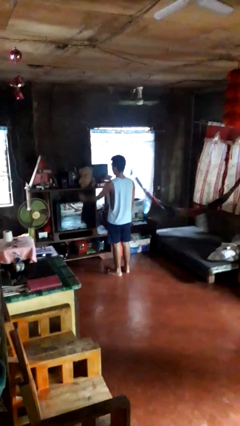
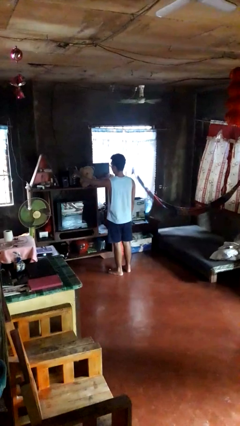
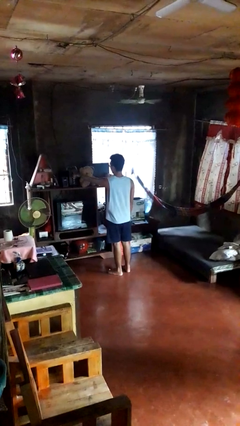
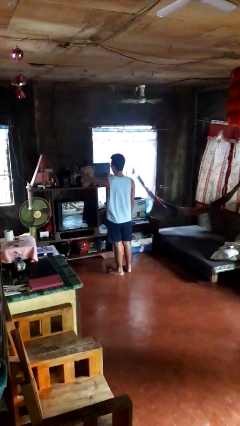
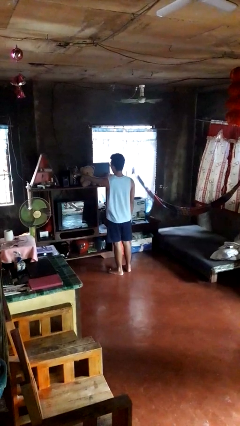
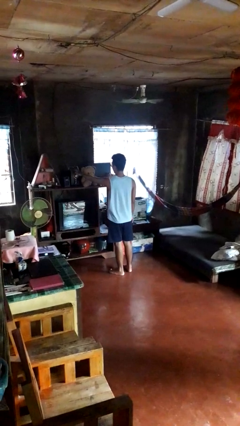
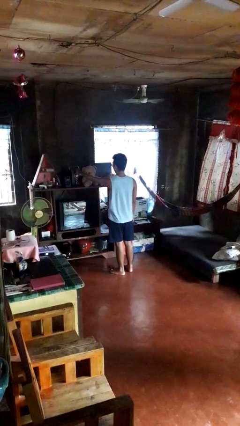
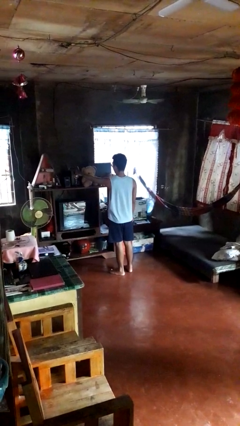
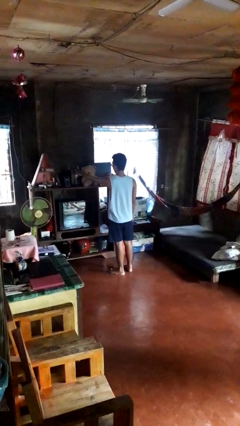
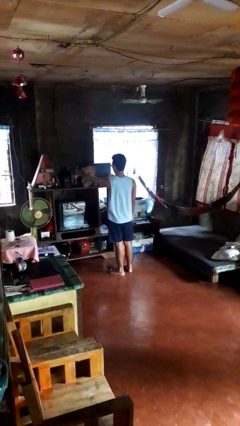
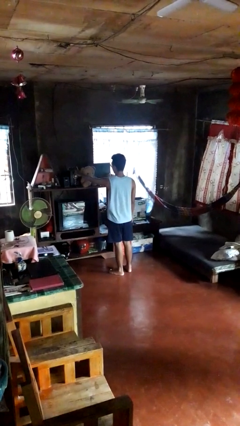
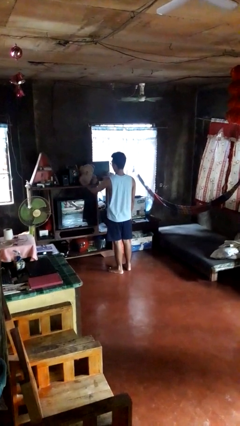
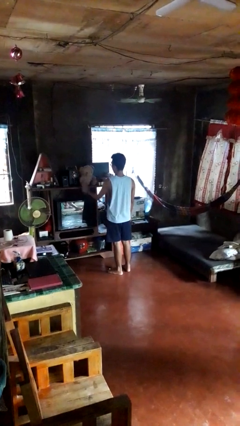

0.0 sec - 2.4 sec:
person taps object with finger

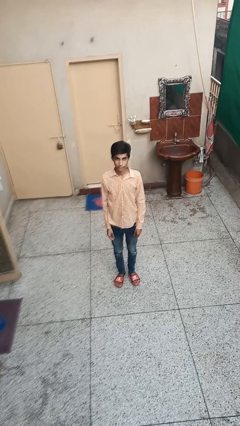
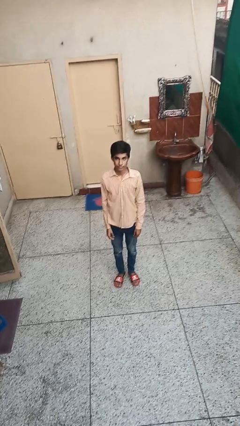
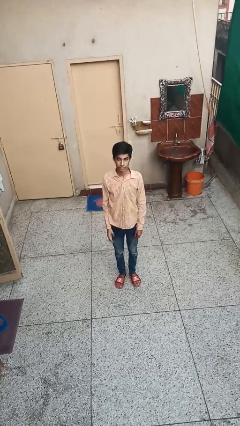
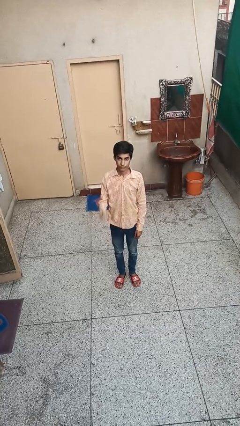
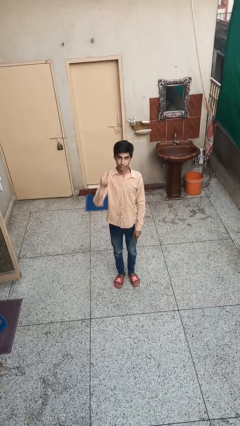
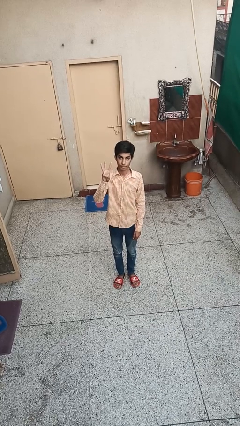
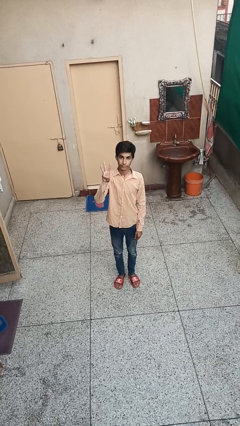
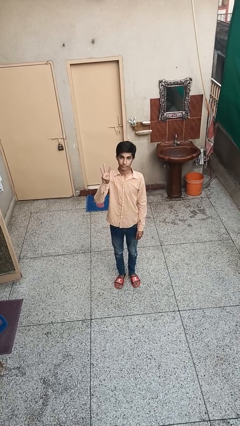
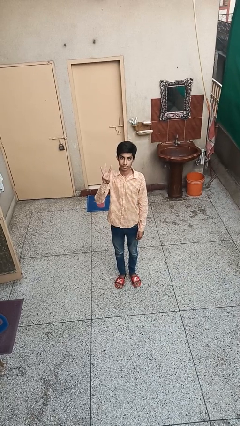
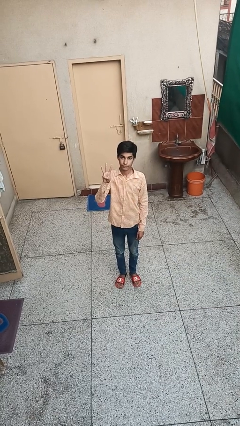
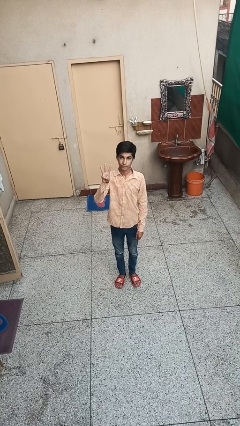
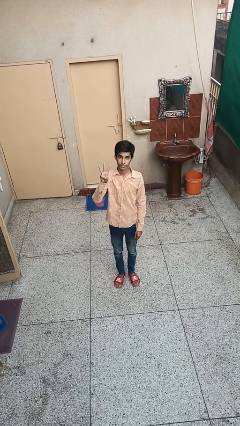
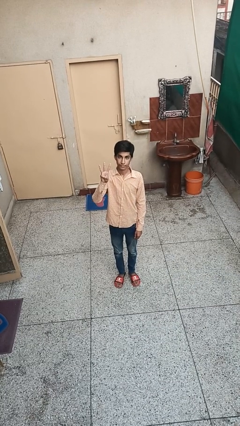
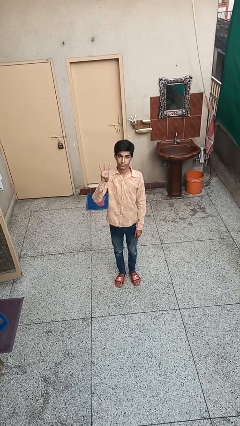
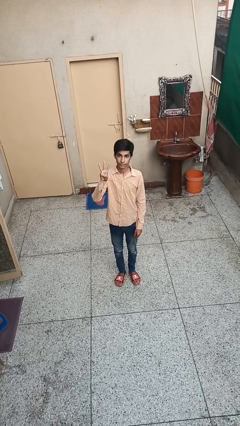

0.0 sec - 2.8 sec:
person gestures number three

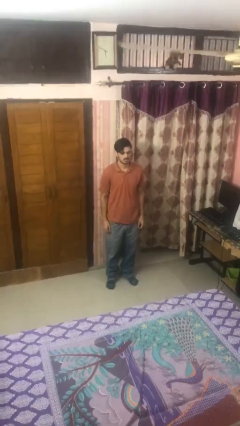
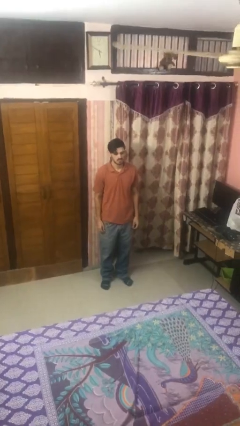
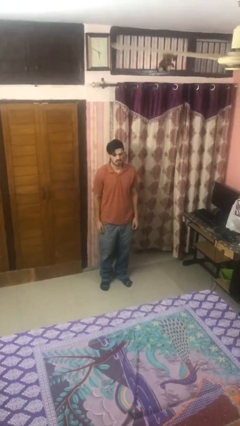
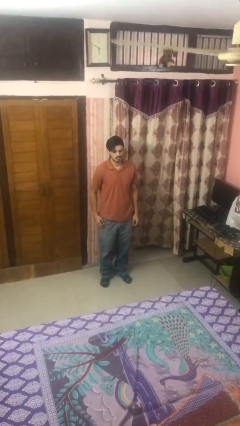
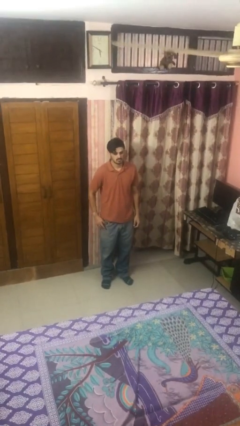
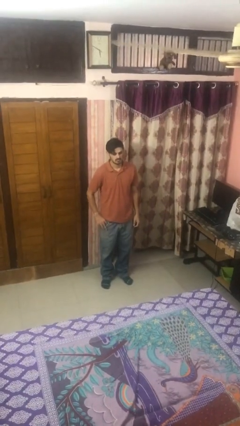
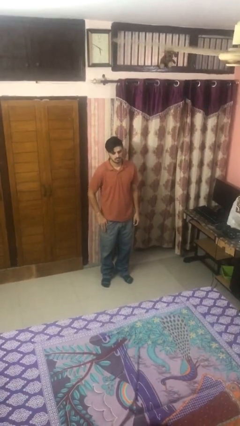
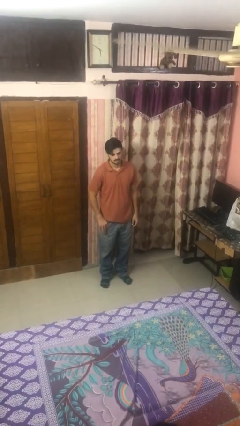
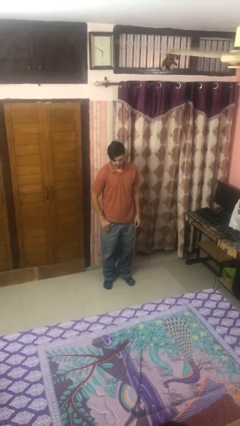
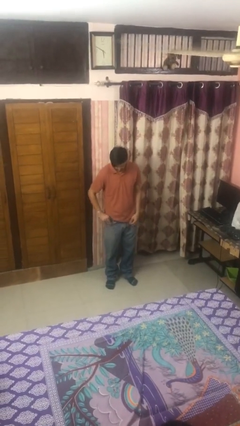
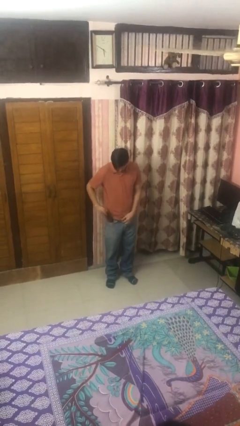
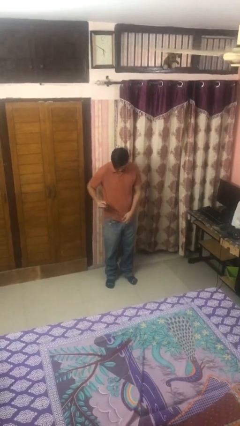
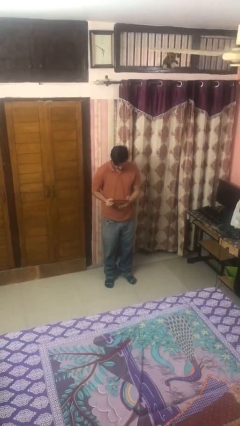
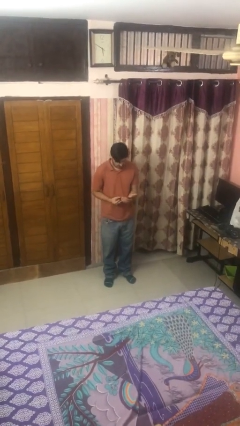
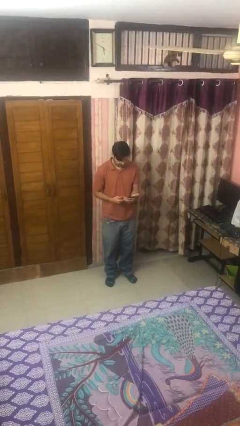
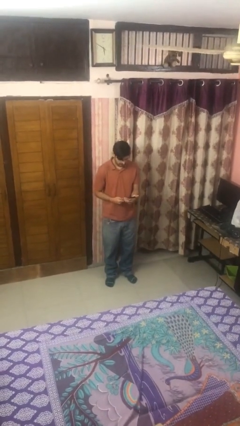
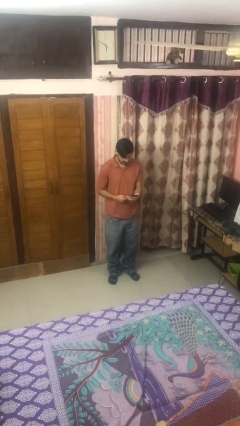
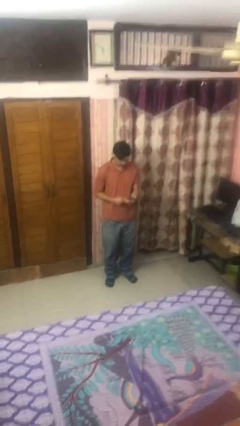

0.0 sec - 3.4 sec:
person takes phone from pocket

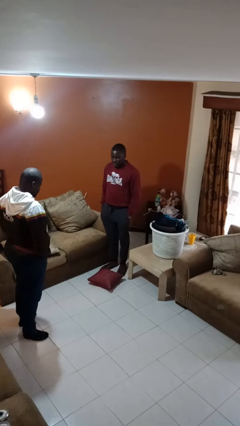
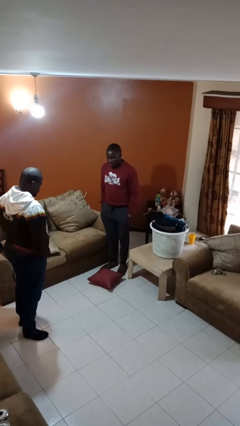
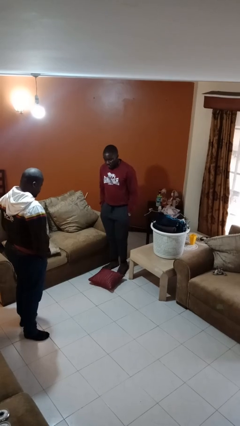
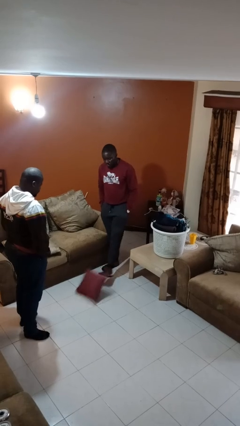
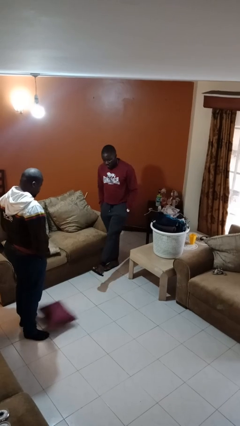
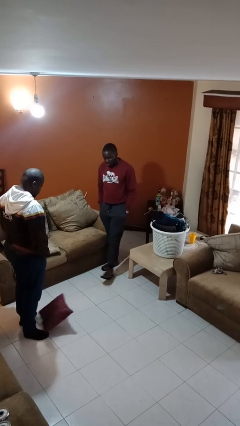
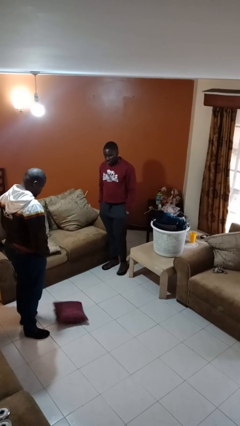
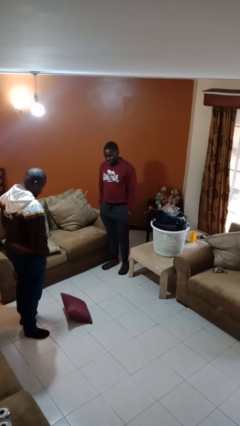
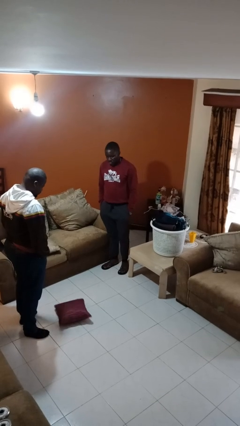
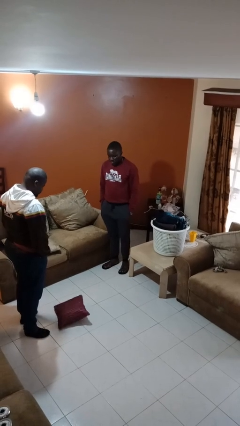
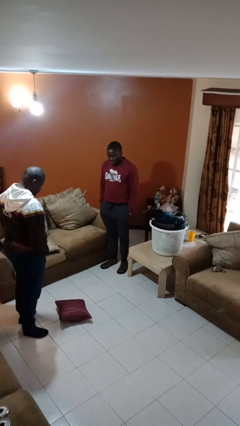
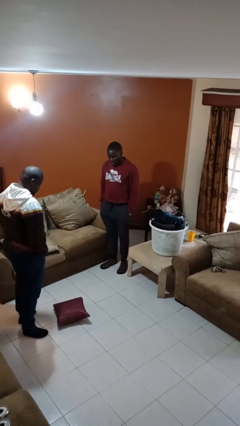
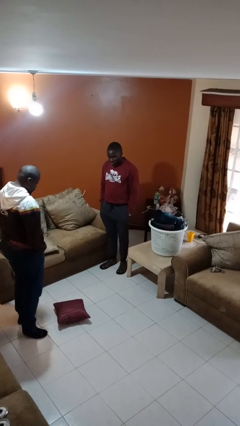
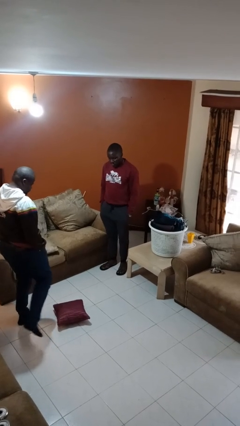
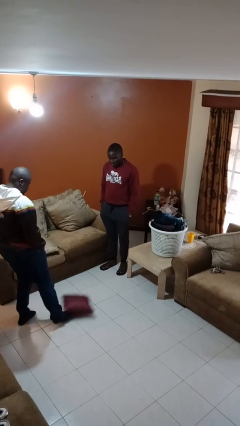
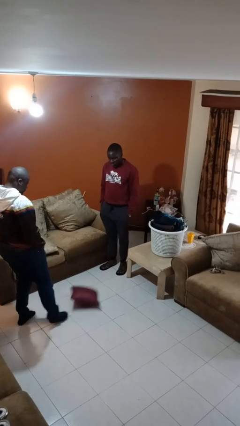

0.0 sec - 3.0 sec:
person kicks object to person

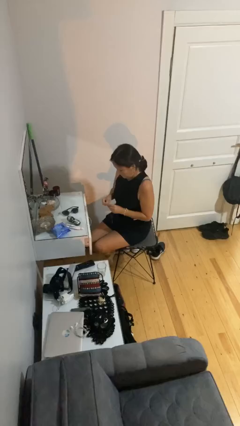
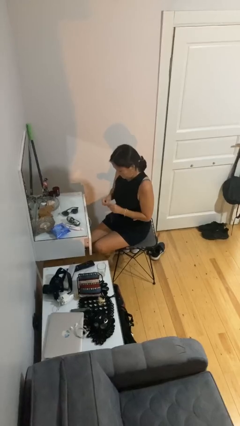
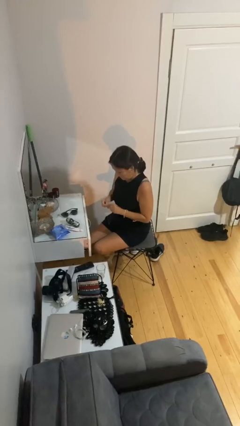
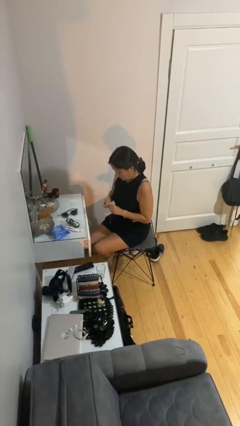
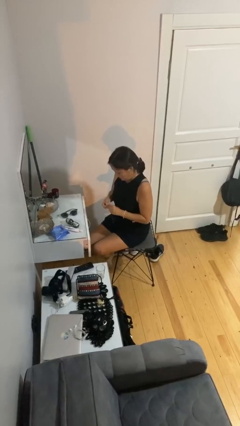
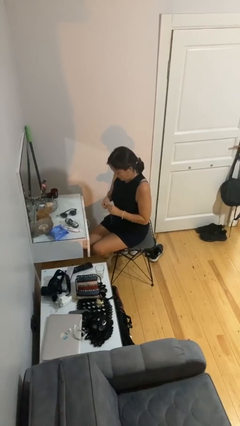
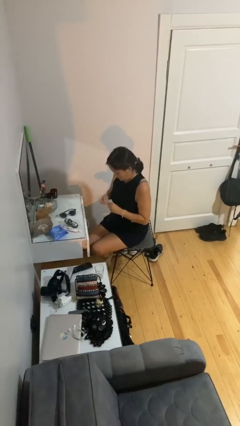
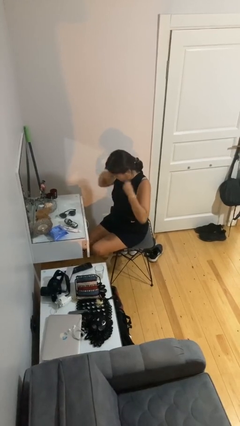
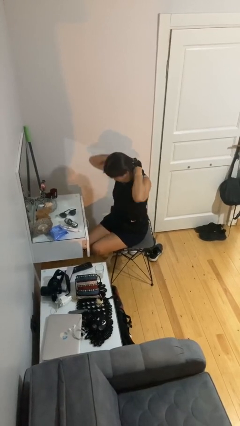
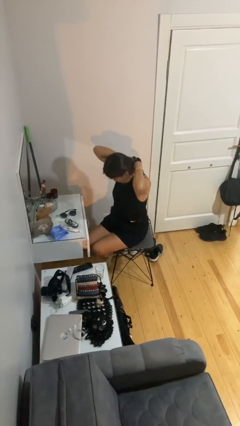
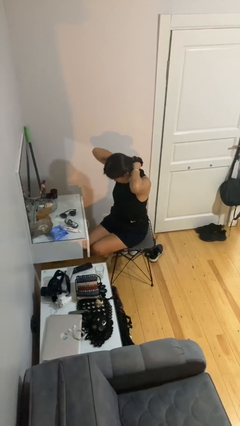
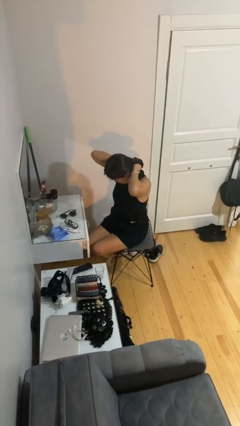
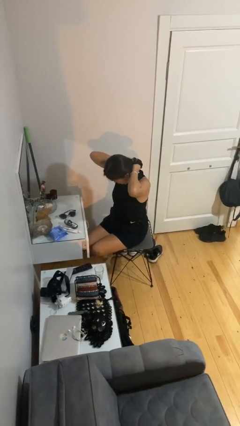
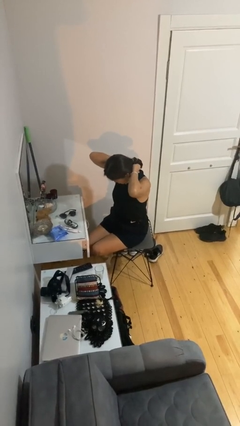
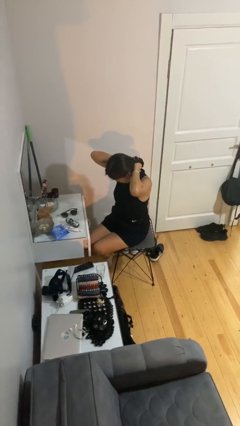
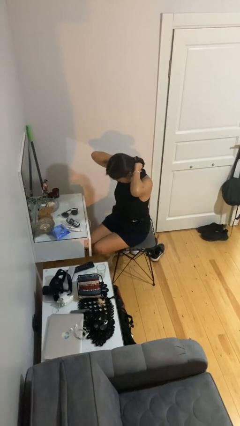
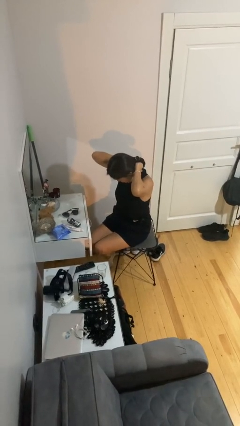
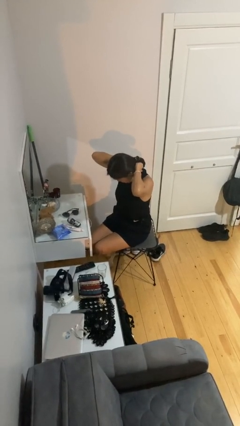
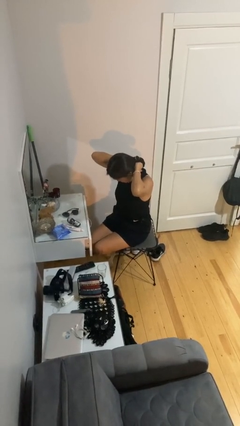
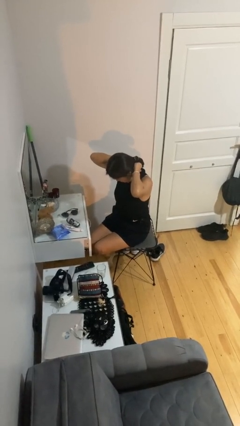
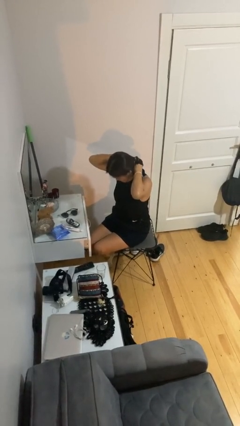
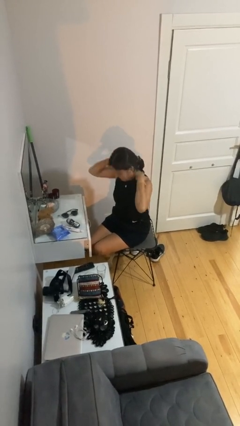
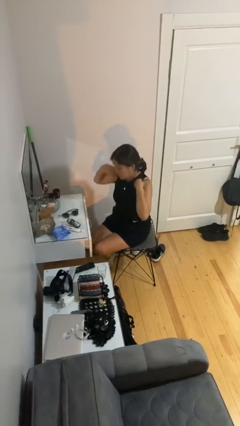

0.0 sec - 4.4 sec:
person puts on necklace

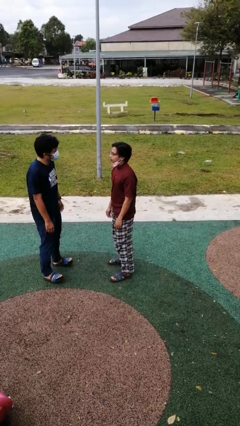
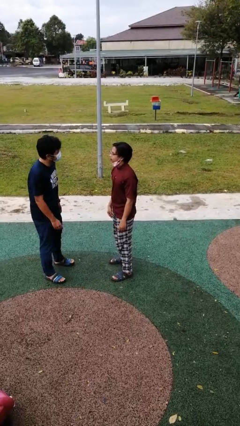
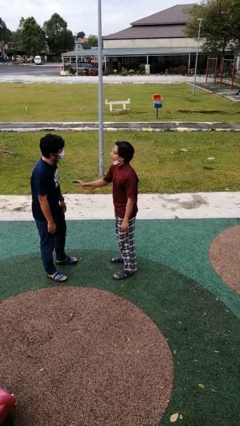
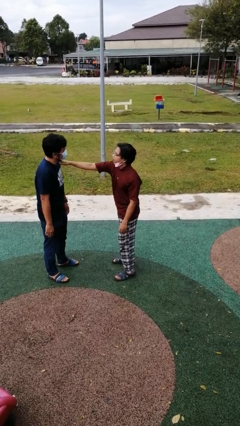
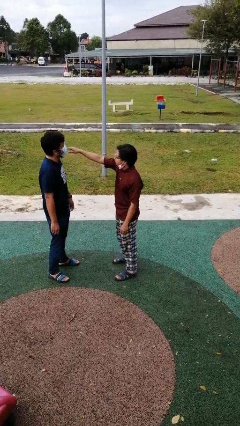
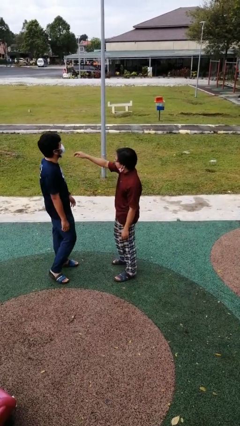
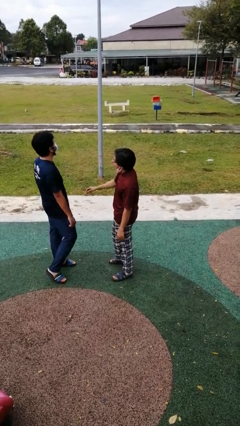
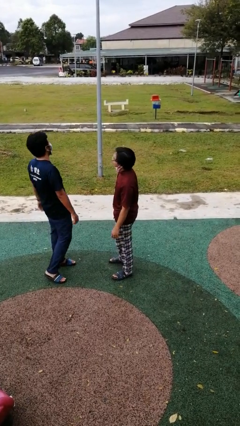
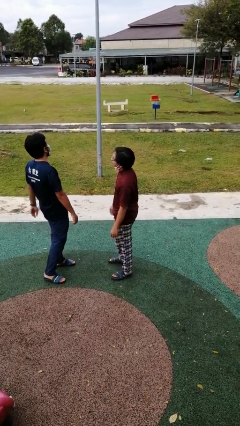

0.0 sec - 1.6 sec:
person shoves person
